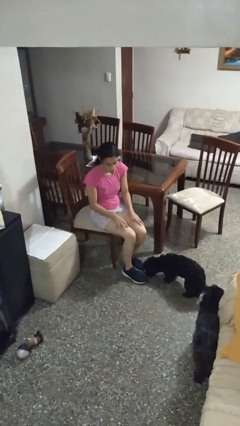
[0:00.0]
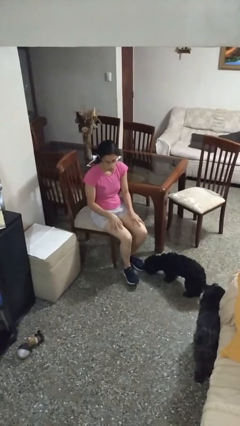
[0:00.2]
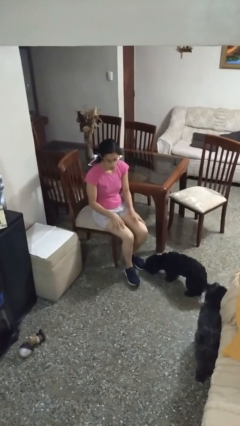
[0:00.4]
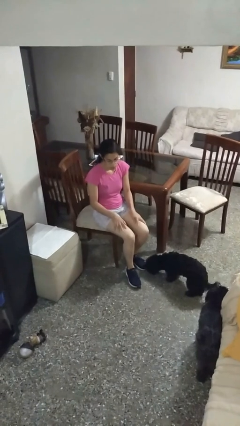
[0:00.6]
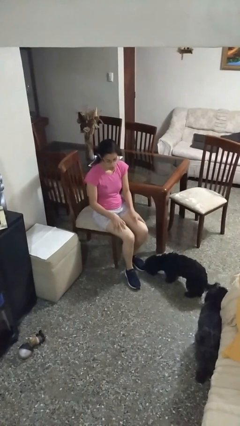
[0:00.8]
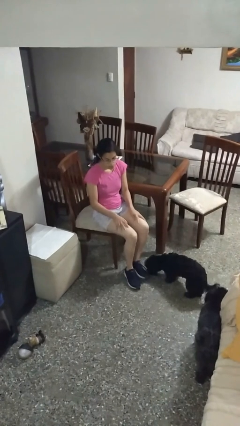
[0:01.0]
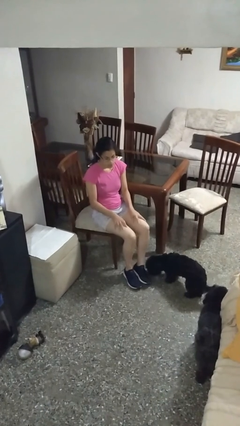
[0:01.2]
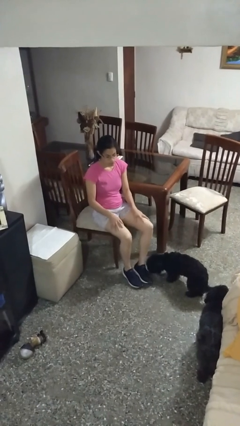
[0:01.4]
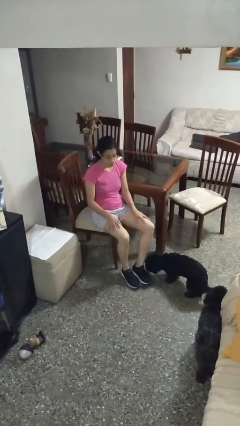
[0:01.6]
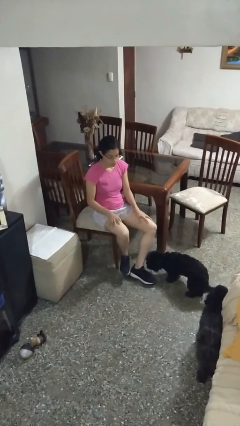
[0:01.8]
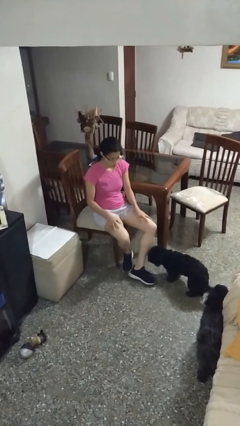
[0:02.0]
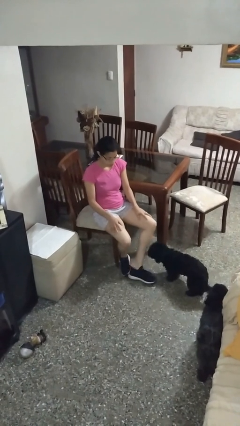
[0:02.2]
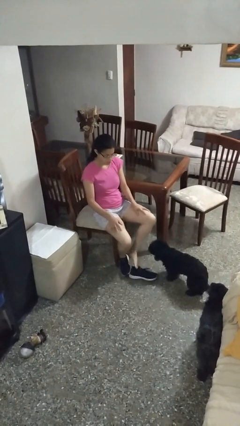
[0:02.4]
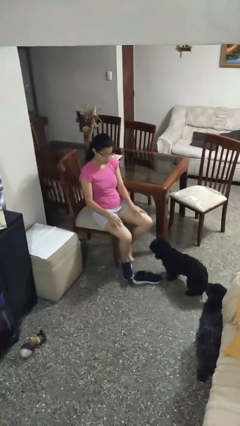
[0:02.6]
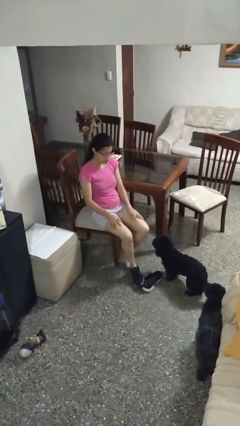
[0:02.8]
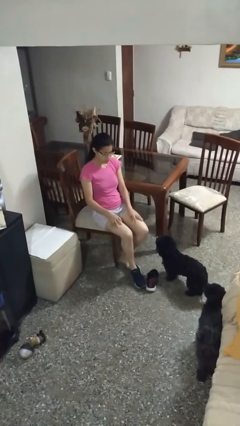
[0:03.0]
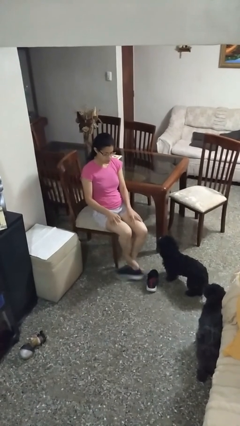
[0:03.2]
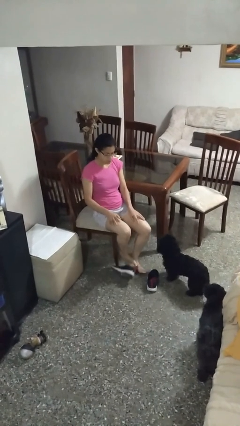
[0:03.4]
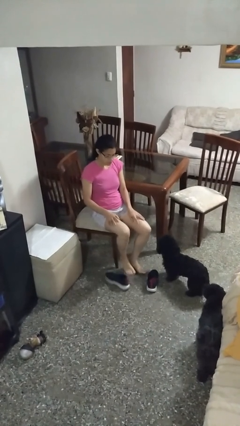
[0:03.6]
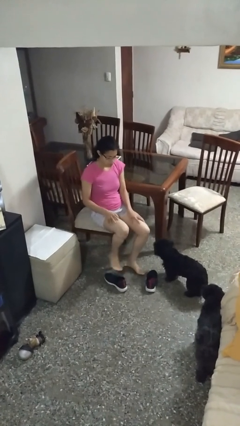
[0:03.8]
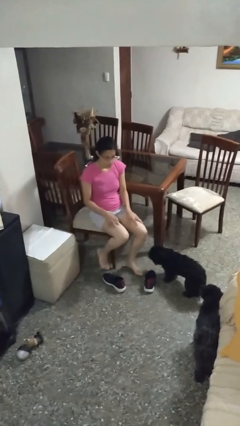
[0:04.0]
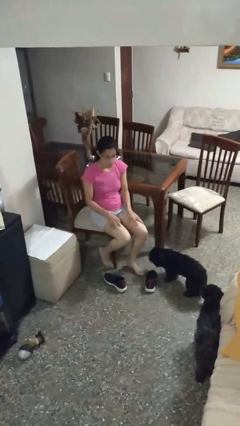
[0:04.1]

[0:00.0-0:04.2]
person takes off shoes

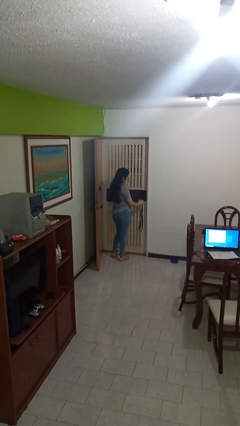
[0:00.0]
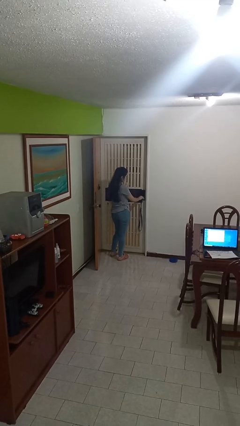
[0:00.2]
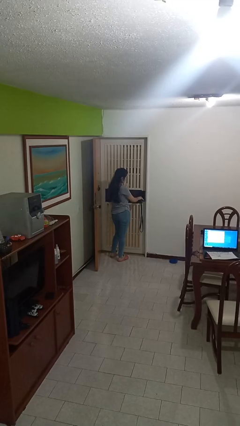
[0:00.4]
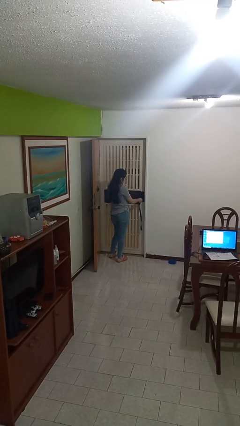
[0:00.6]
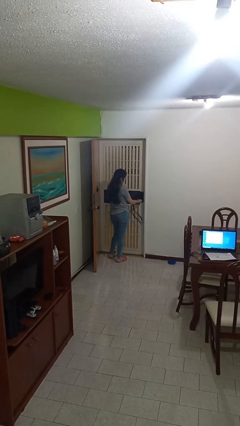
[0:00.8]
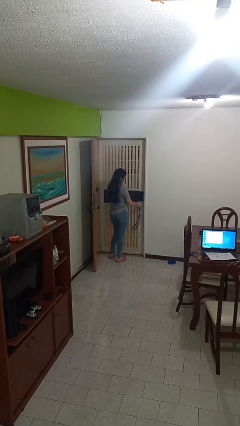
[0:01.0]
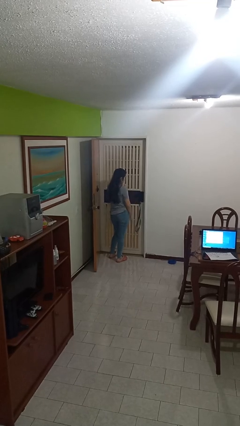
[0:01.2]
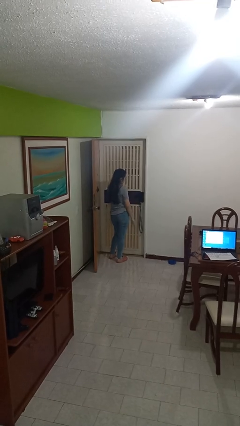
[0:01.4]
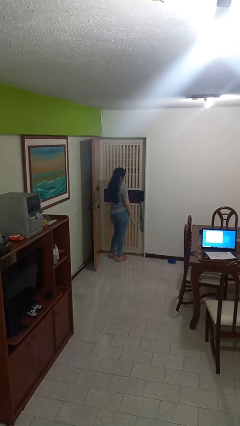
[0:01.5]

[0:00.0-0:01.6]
person locks door with keys

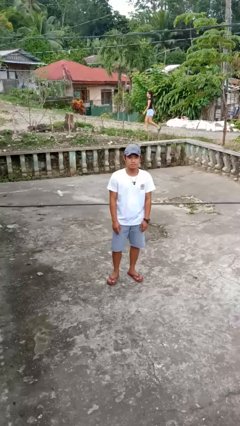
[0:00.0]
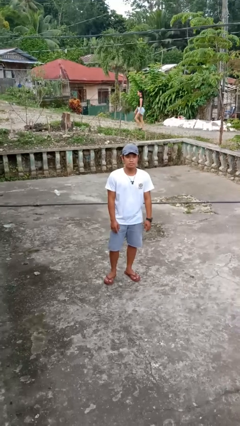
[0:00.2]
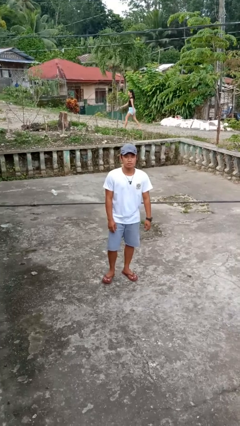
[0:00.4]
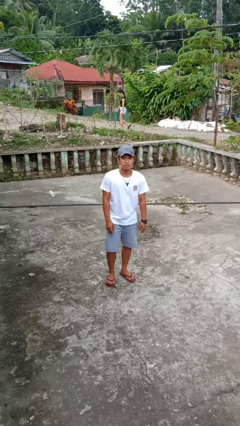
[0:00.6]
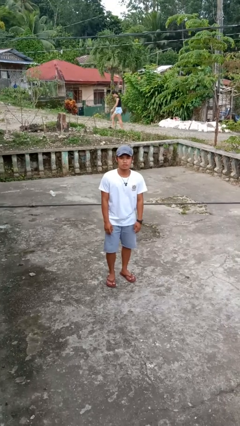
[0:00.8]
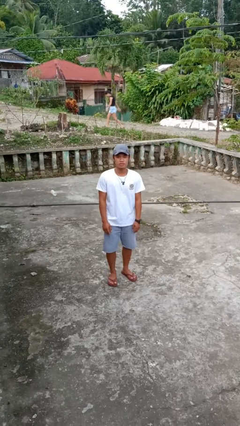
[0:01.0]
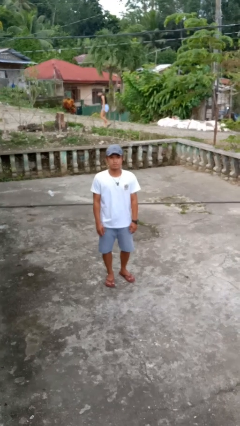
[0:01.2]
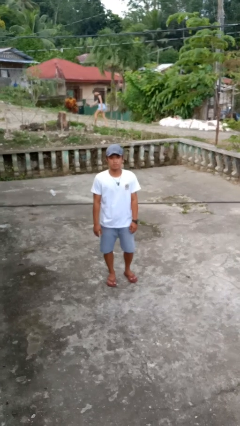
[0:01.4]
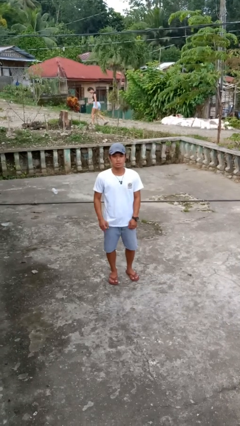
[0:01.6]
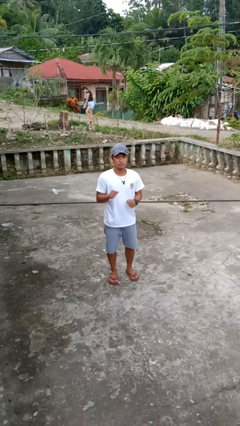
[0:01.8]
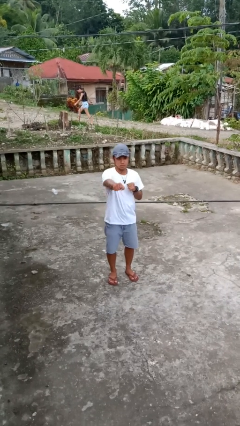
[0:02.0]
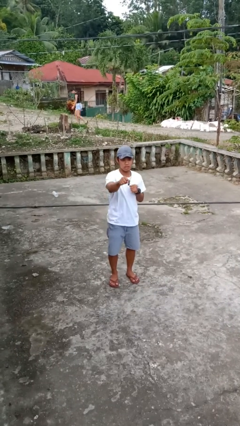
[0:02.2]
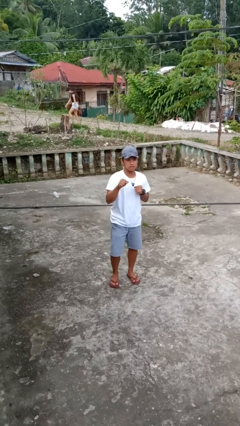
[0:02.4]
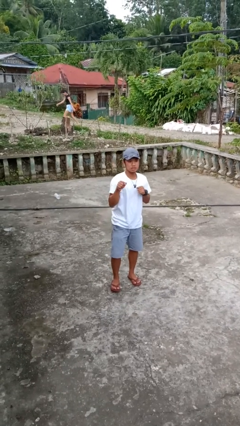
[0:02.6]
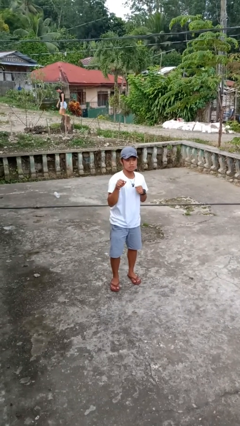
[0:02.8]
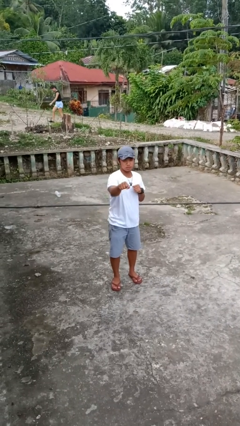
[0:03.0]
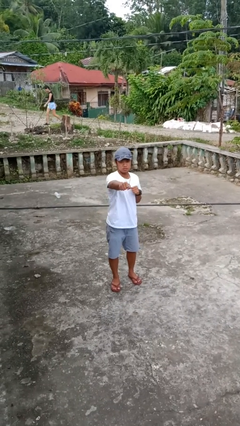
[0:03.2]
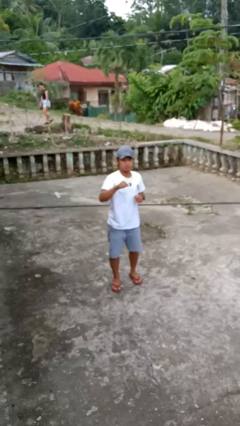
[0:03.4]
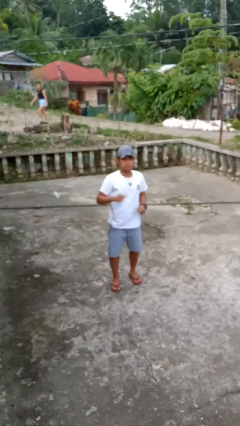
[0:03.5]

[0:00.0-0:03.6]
person punches

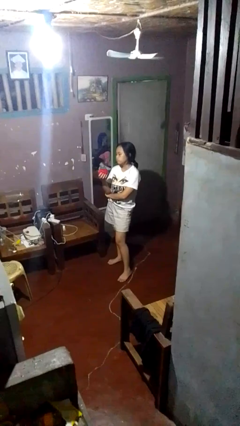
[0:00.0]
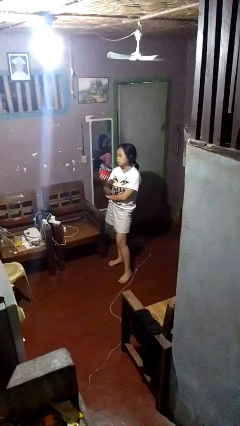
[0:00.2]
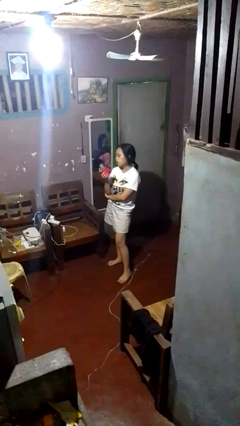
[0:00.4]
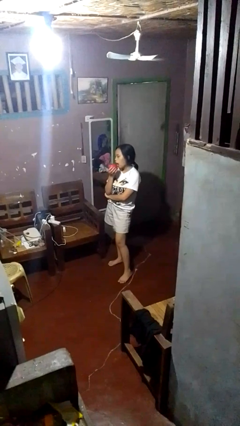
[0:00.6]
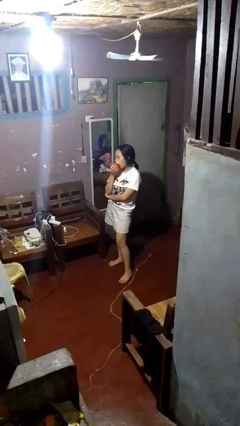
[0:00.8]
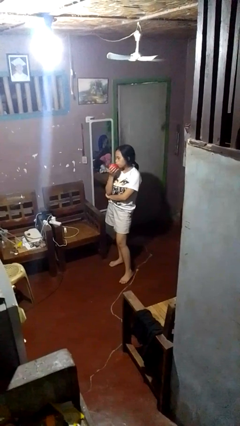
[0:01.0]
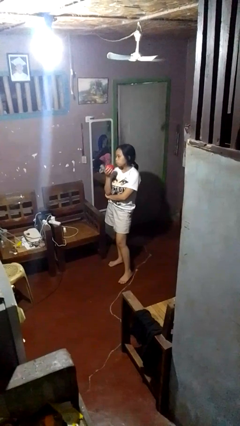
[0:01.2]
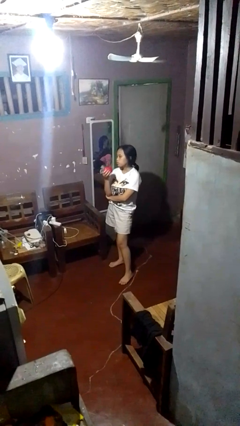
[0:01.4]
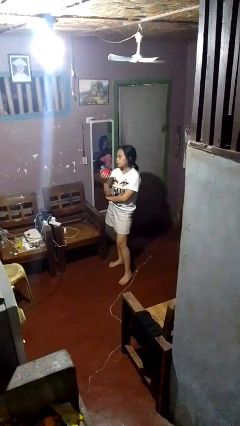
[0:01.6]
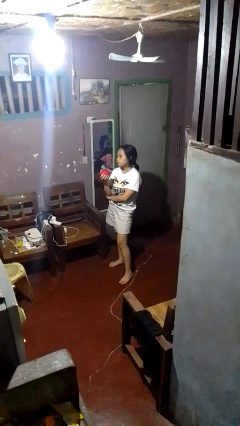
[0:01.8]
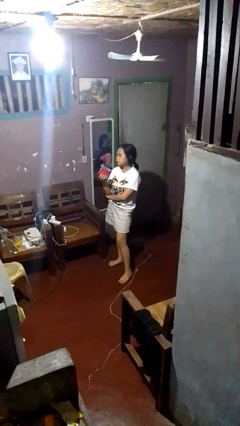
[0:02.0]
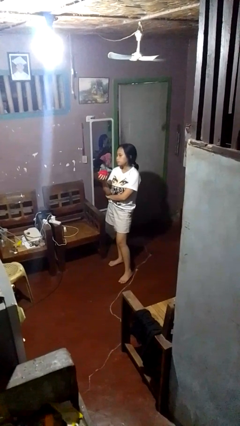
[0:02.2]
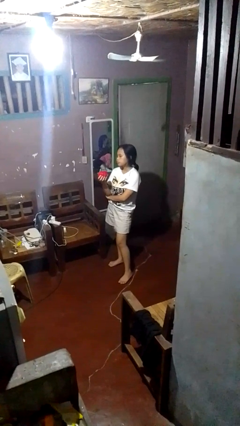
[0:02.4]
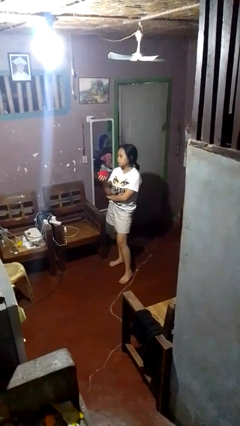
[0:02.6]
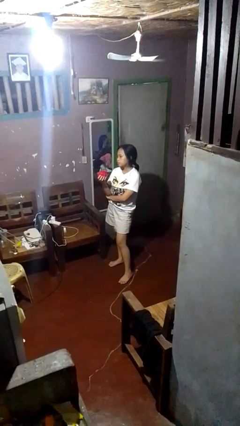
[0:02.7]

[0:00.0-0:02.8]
person eats apple

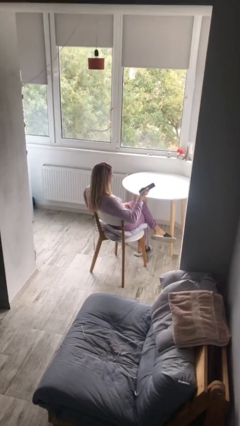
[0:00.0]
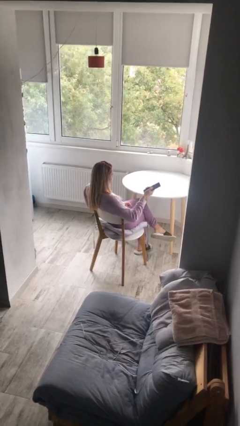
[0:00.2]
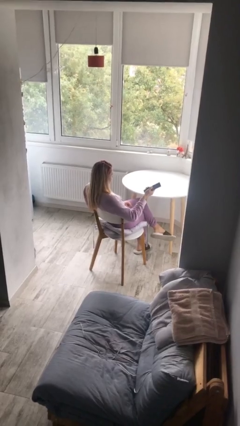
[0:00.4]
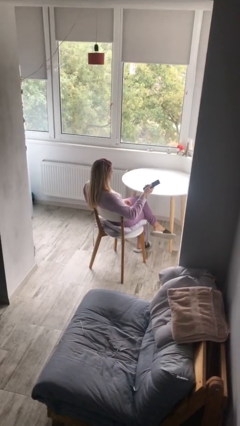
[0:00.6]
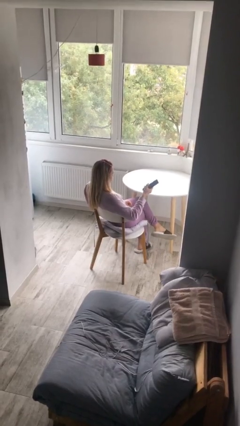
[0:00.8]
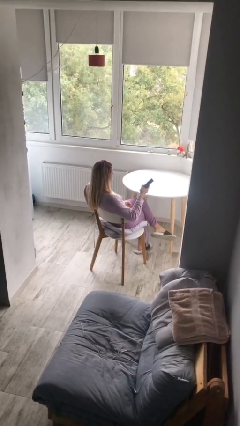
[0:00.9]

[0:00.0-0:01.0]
person uses television remote

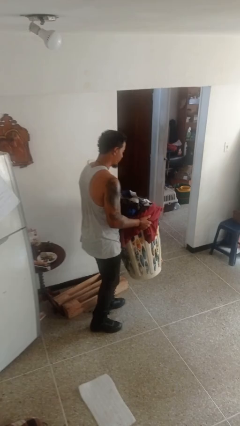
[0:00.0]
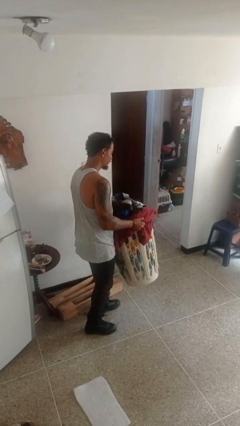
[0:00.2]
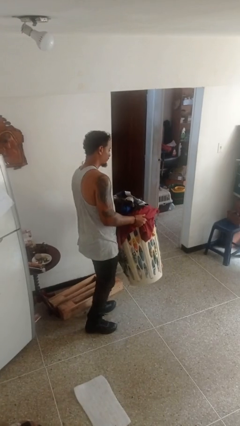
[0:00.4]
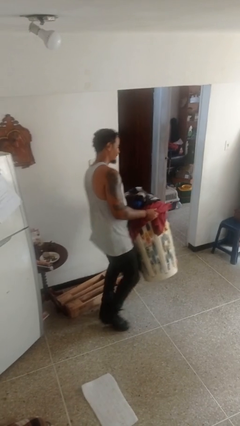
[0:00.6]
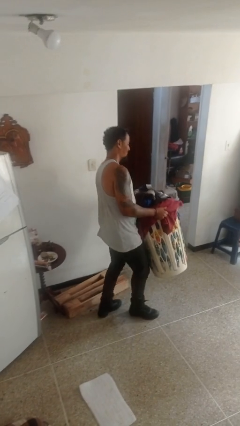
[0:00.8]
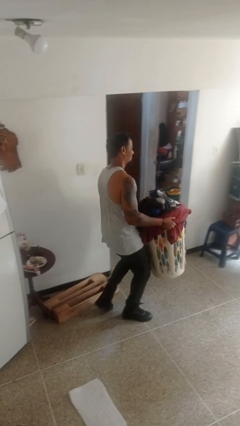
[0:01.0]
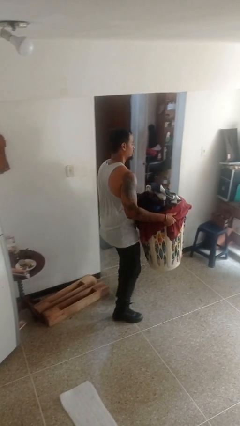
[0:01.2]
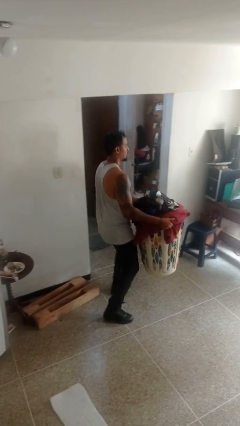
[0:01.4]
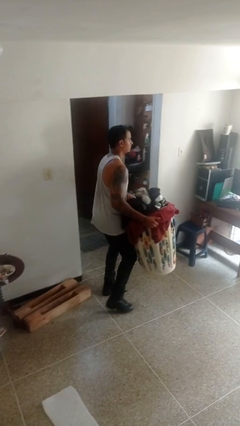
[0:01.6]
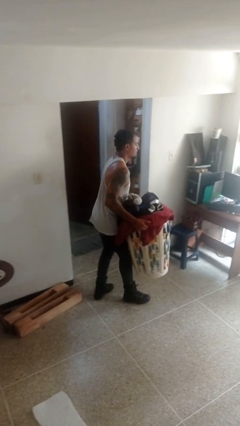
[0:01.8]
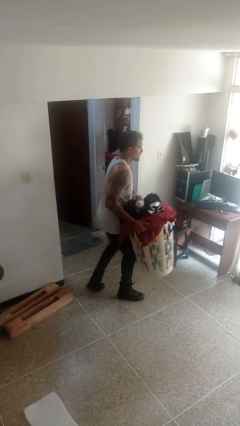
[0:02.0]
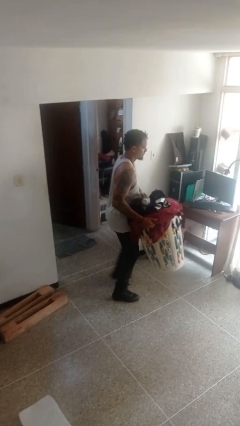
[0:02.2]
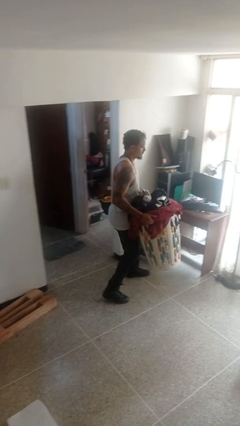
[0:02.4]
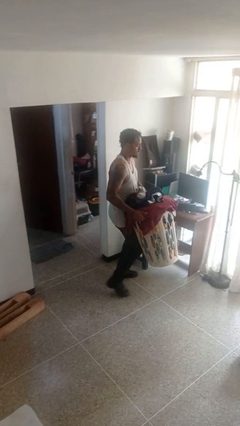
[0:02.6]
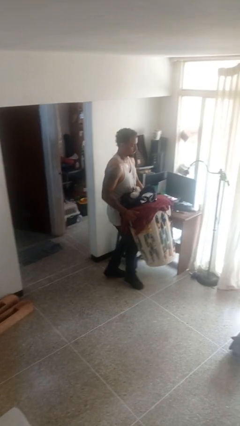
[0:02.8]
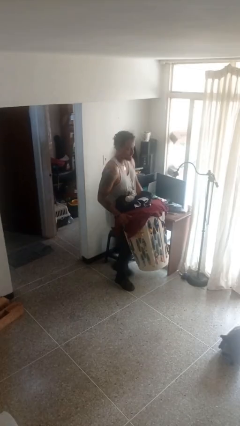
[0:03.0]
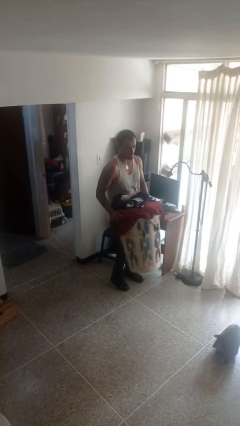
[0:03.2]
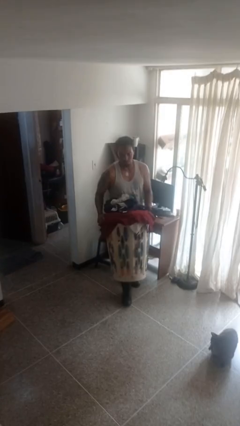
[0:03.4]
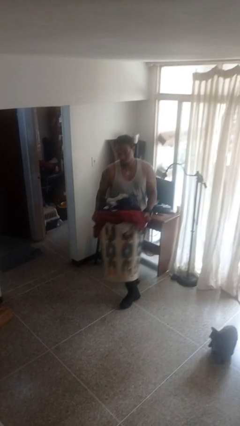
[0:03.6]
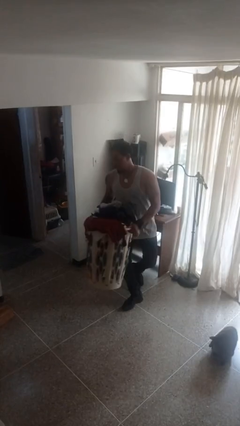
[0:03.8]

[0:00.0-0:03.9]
person carries laundry basket

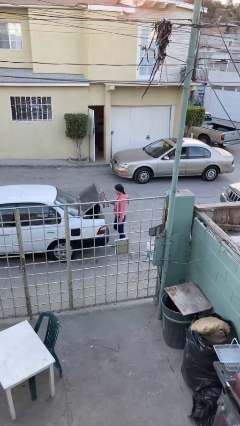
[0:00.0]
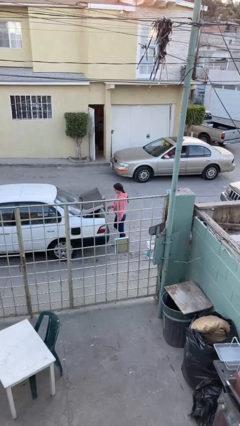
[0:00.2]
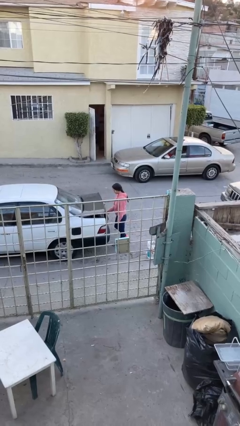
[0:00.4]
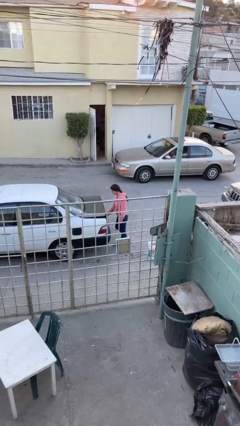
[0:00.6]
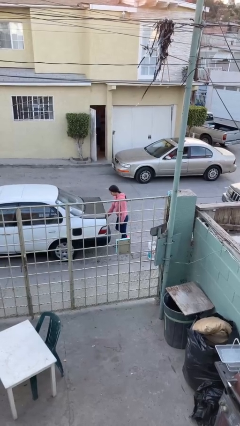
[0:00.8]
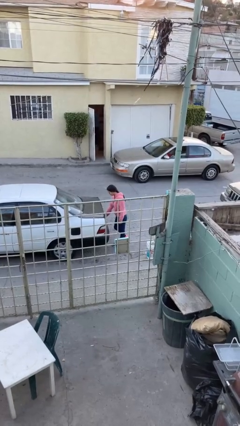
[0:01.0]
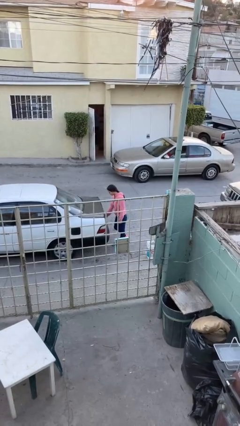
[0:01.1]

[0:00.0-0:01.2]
person closes car trunk
